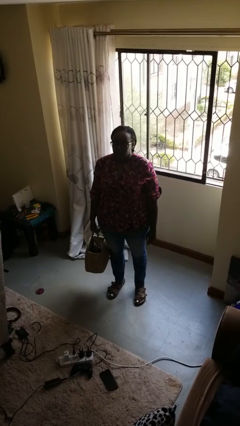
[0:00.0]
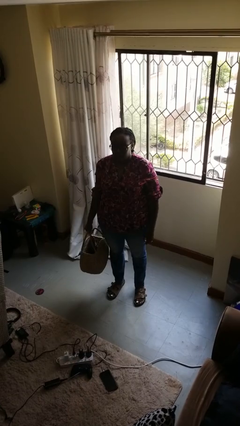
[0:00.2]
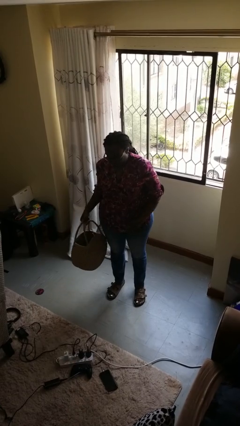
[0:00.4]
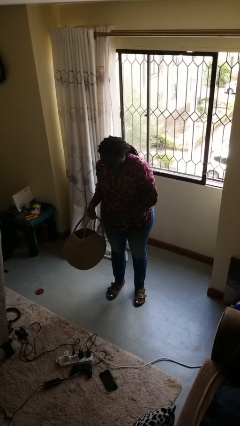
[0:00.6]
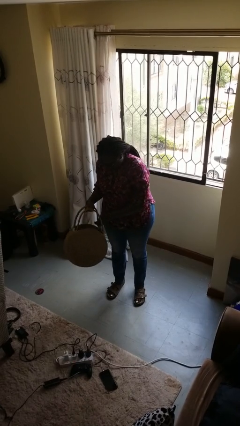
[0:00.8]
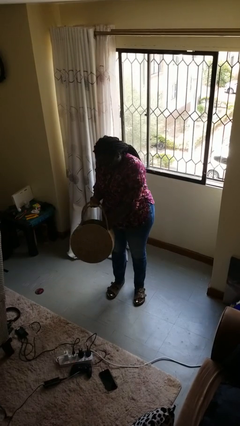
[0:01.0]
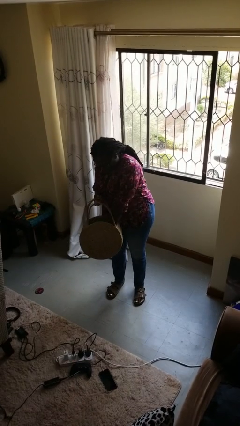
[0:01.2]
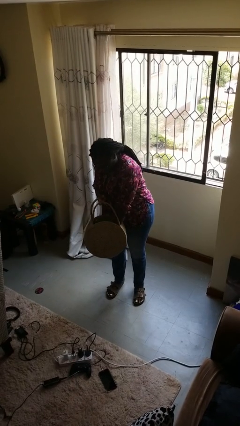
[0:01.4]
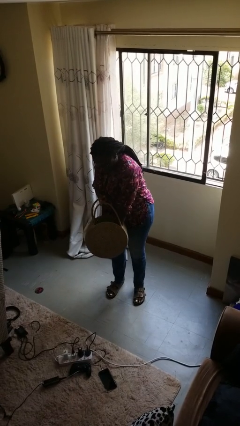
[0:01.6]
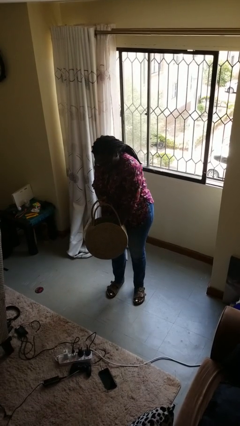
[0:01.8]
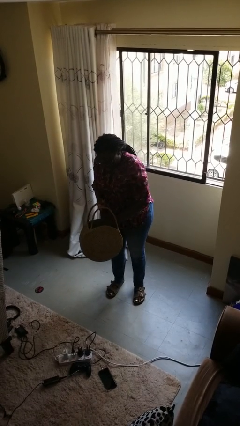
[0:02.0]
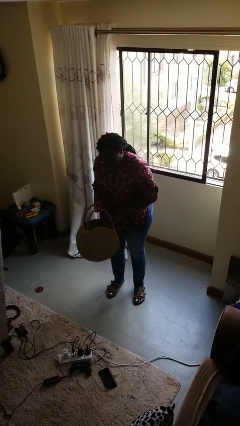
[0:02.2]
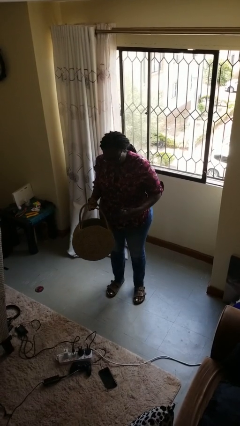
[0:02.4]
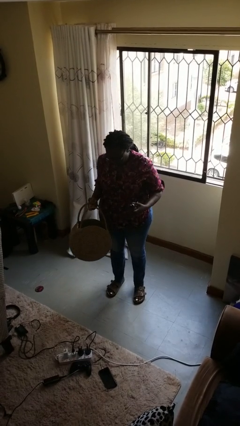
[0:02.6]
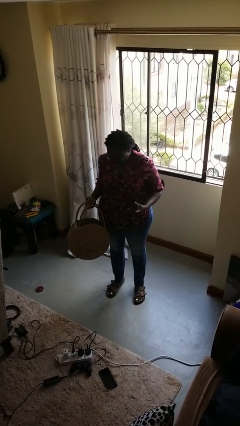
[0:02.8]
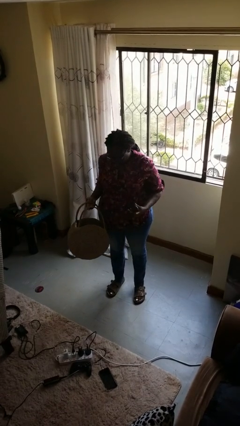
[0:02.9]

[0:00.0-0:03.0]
person takes object from basket

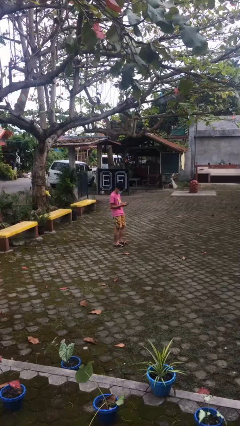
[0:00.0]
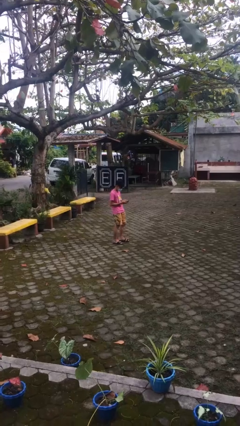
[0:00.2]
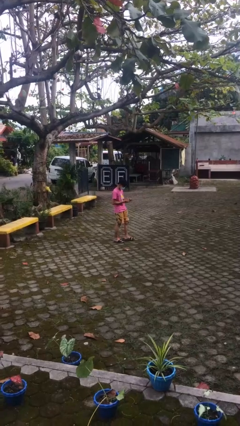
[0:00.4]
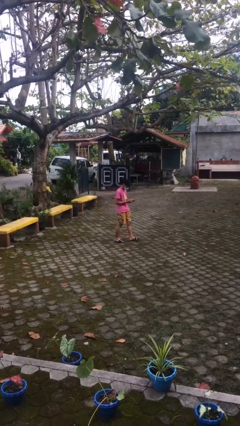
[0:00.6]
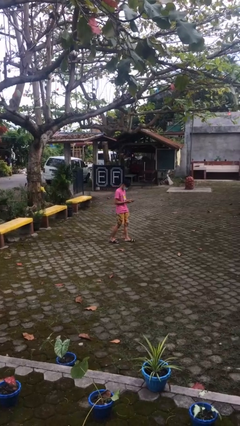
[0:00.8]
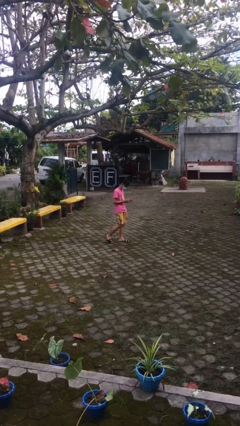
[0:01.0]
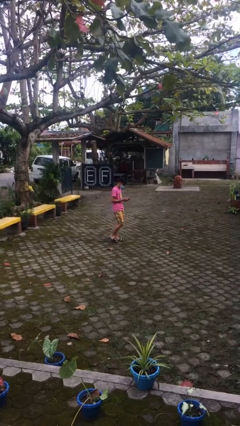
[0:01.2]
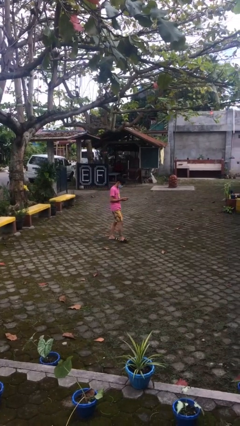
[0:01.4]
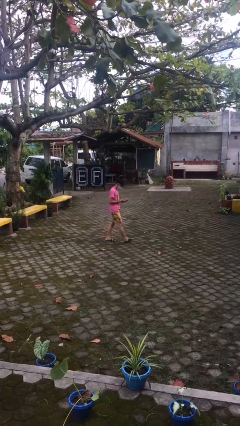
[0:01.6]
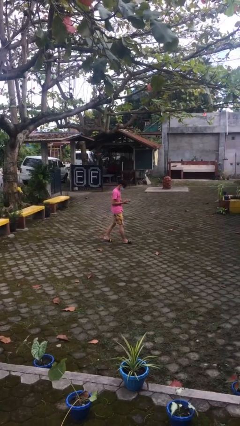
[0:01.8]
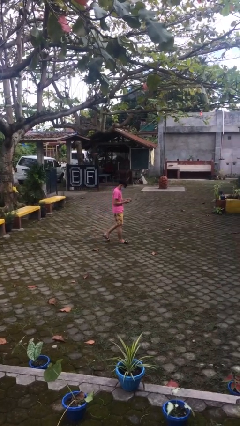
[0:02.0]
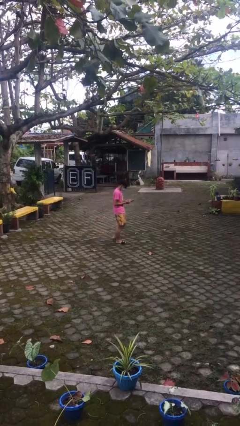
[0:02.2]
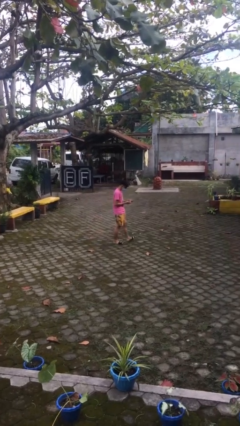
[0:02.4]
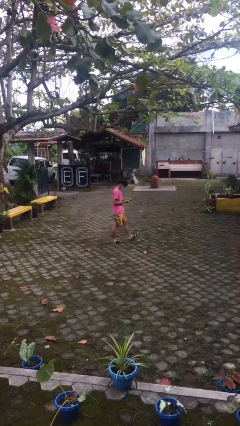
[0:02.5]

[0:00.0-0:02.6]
person texts on phone

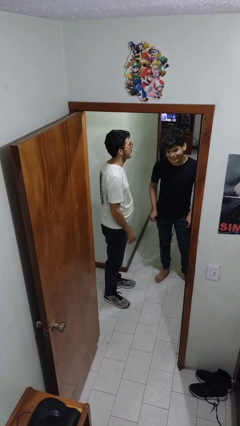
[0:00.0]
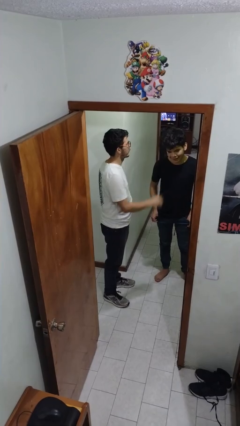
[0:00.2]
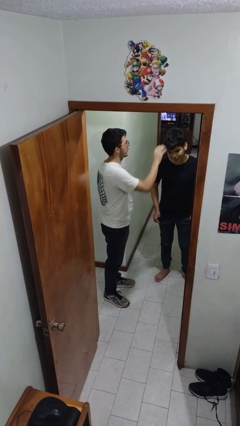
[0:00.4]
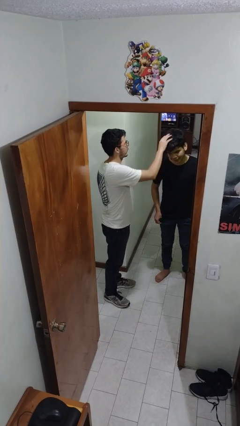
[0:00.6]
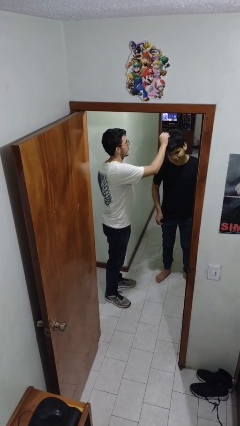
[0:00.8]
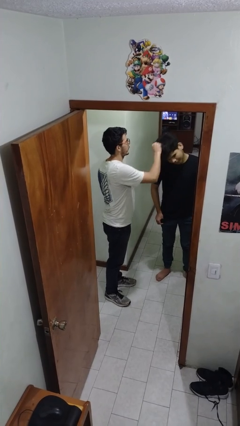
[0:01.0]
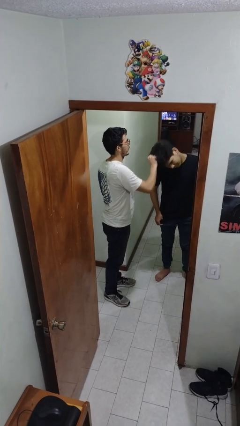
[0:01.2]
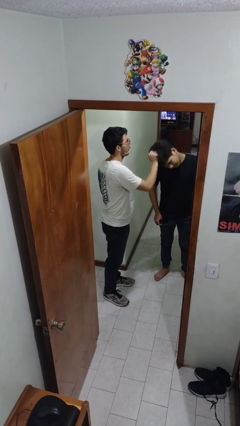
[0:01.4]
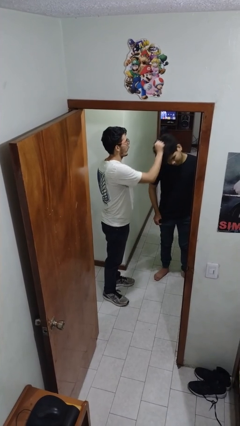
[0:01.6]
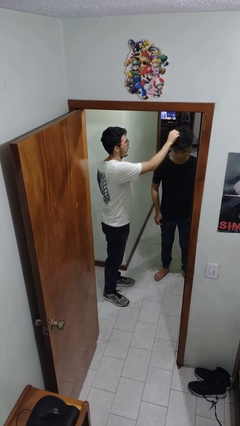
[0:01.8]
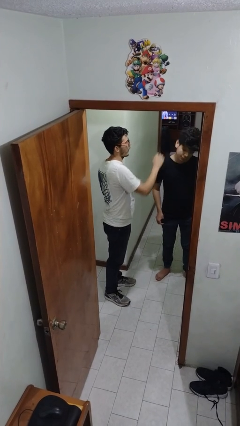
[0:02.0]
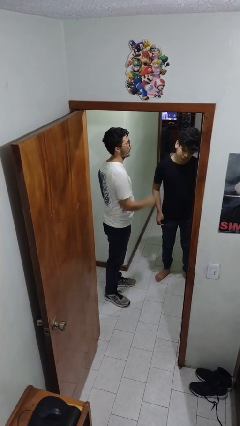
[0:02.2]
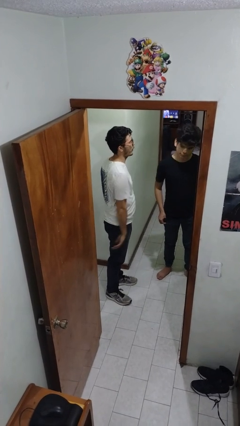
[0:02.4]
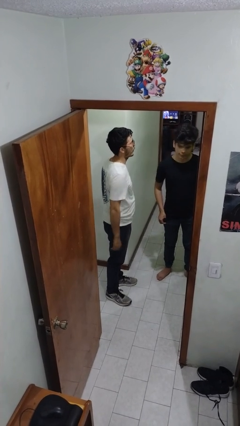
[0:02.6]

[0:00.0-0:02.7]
person grabs person by hair

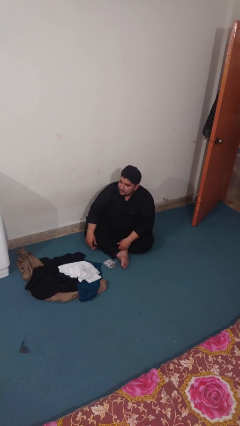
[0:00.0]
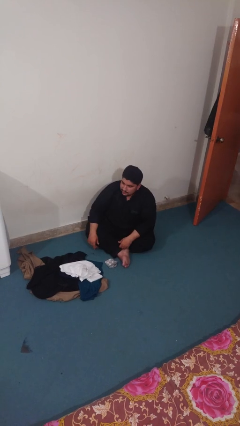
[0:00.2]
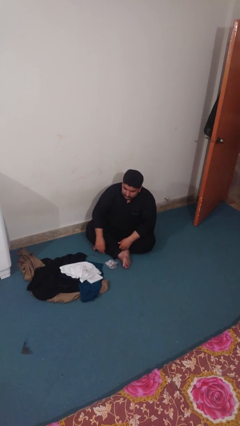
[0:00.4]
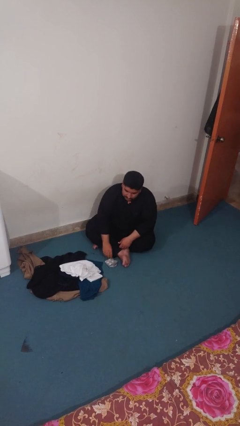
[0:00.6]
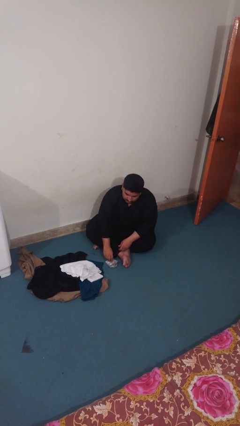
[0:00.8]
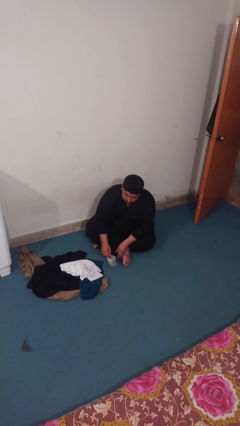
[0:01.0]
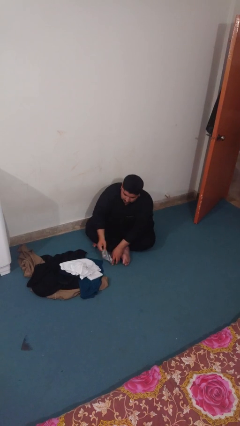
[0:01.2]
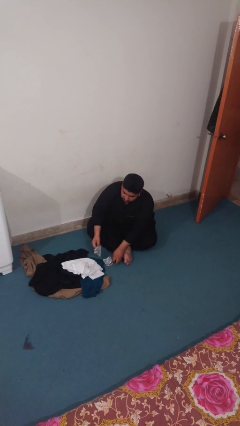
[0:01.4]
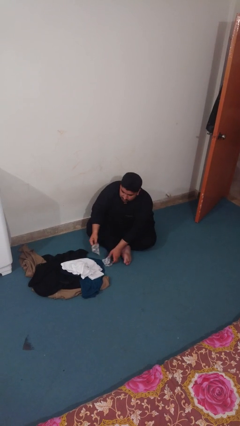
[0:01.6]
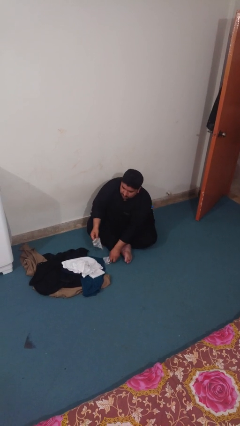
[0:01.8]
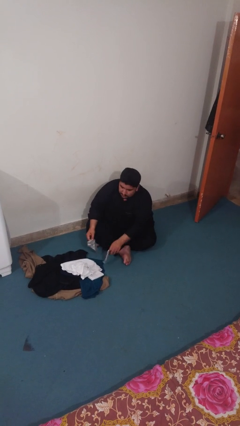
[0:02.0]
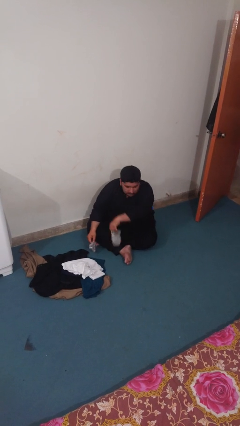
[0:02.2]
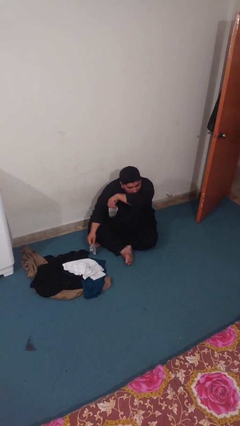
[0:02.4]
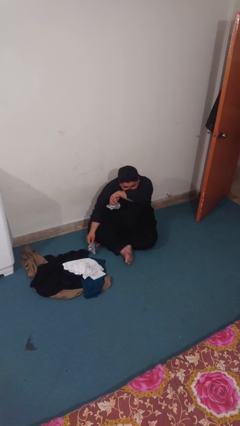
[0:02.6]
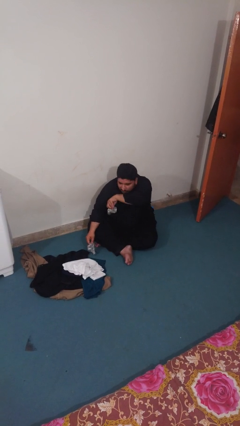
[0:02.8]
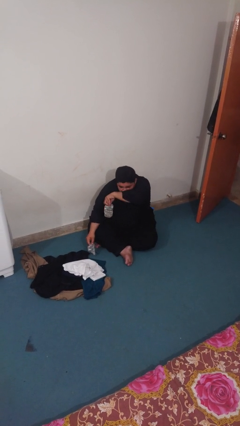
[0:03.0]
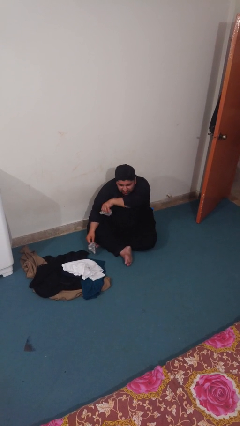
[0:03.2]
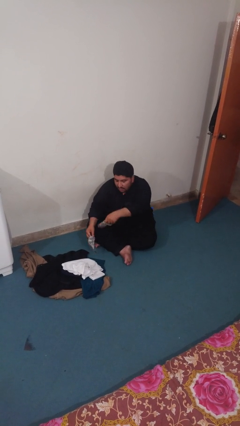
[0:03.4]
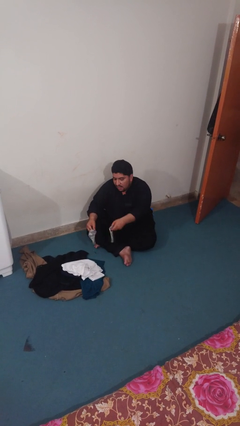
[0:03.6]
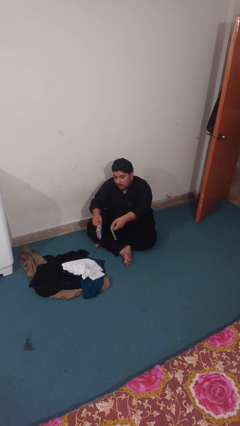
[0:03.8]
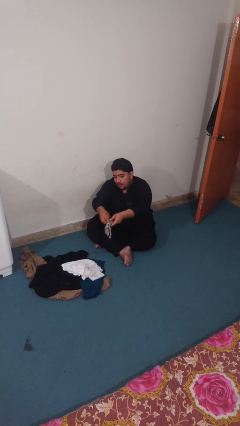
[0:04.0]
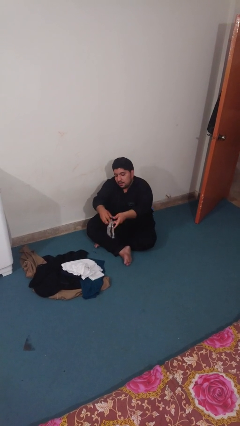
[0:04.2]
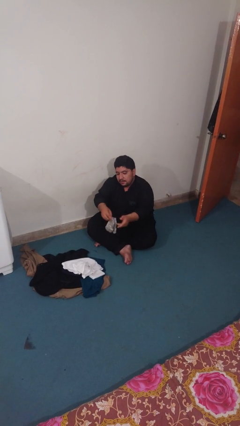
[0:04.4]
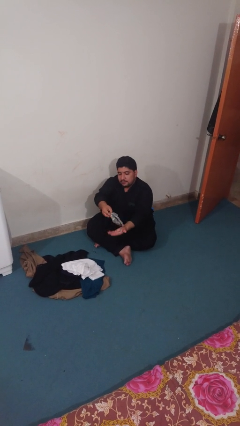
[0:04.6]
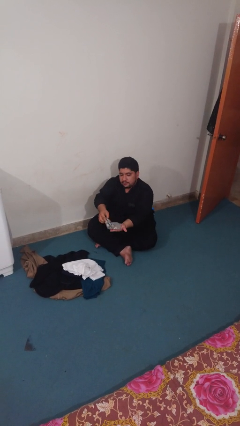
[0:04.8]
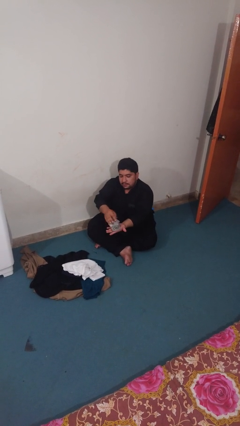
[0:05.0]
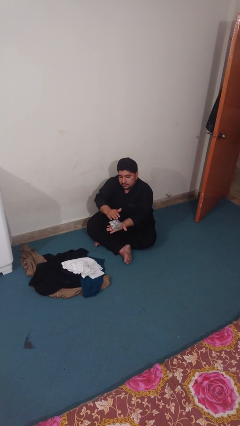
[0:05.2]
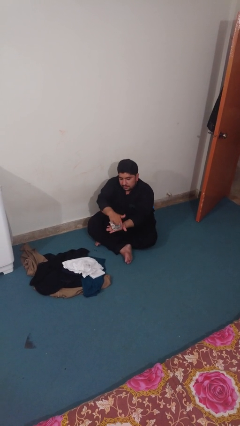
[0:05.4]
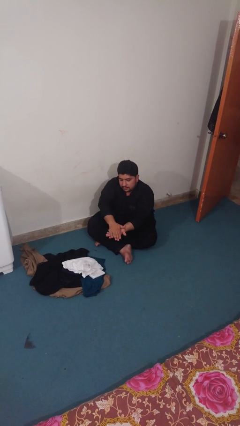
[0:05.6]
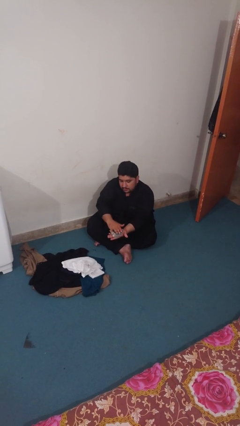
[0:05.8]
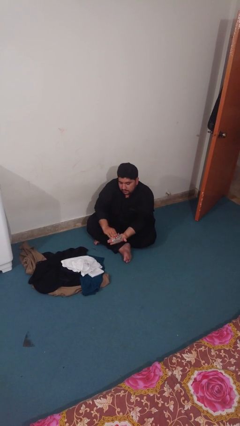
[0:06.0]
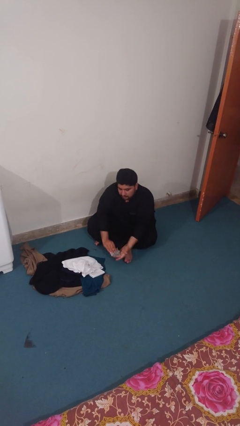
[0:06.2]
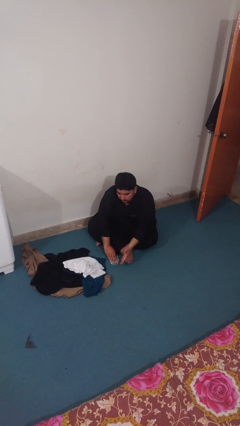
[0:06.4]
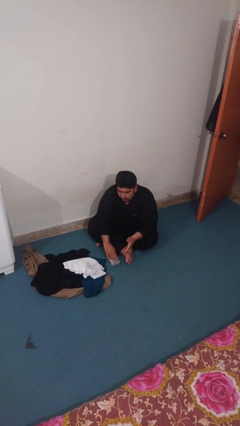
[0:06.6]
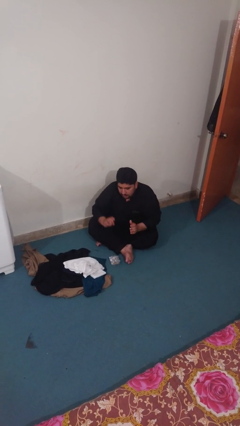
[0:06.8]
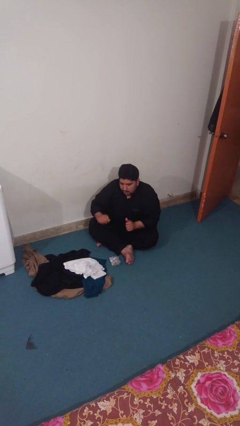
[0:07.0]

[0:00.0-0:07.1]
person folds socks

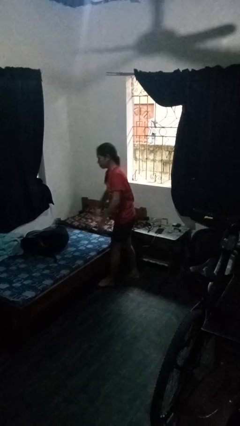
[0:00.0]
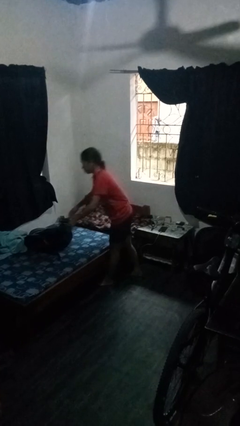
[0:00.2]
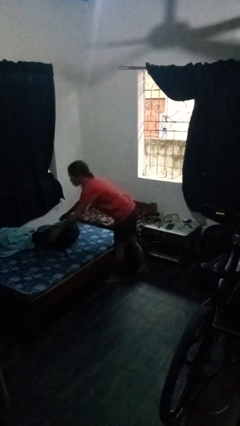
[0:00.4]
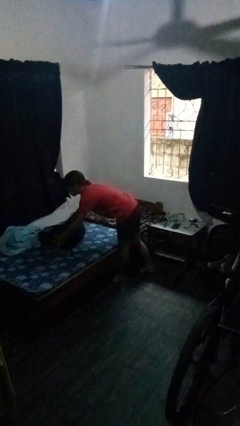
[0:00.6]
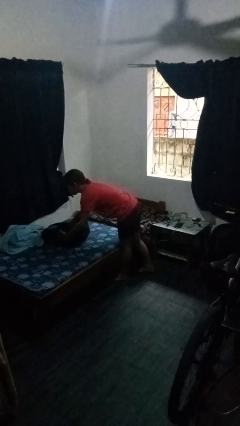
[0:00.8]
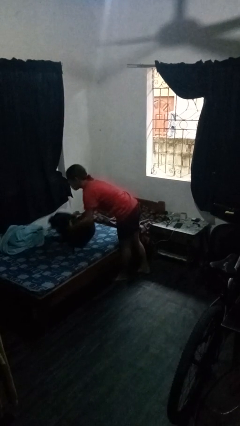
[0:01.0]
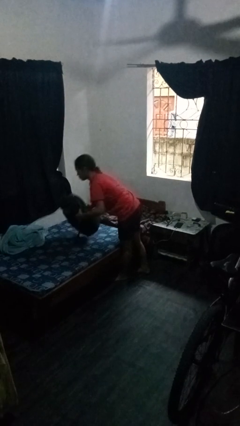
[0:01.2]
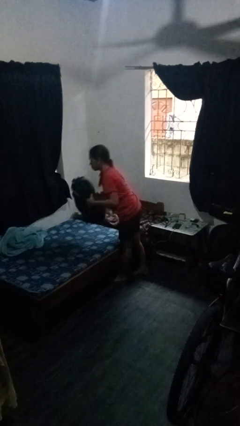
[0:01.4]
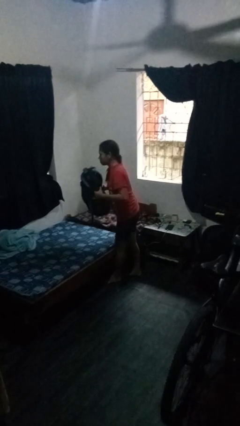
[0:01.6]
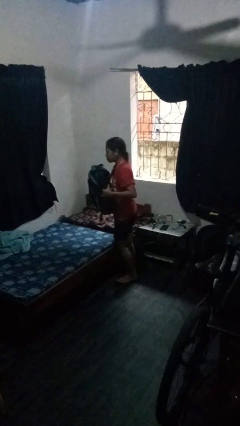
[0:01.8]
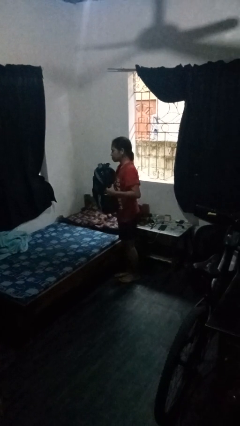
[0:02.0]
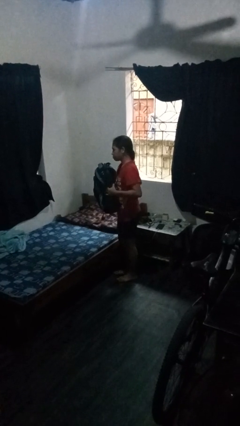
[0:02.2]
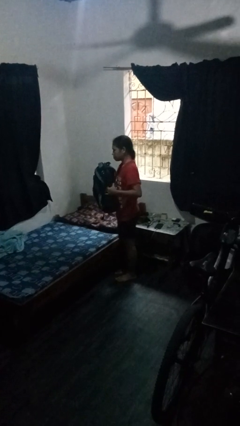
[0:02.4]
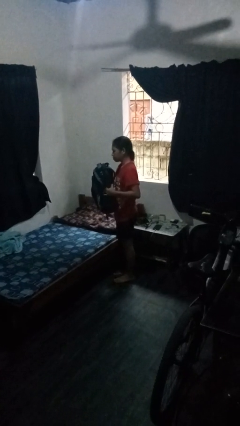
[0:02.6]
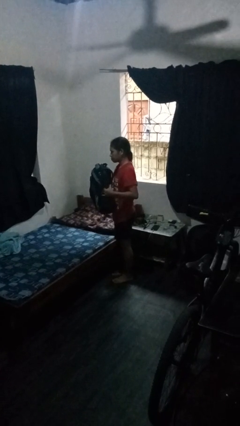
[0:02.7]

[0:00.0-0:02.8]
person picks up object from bed
